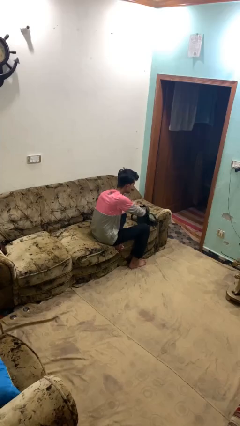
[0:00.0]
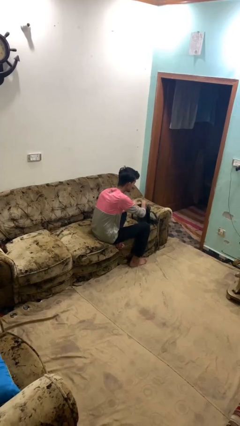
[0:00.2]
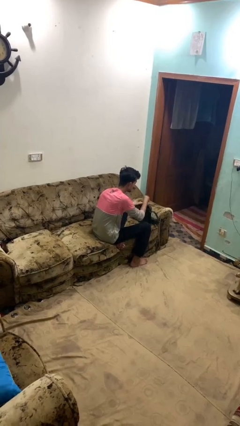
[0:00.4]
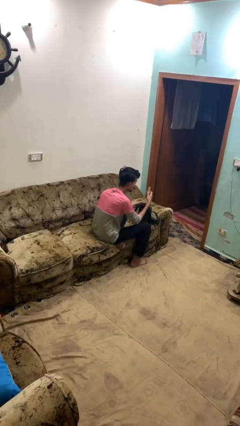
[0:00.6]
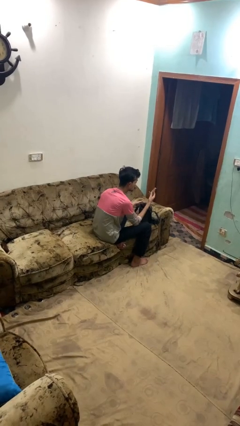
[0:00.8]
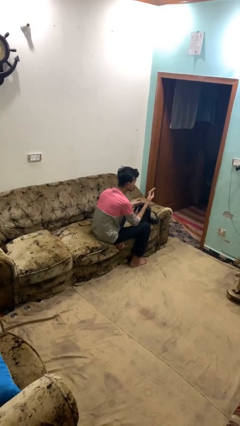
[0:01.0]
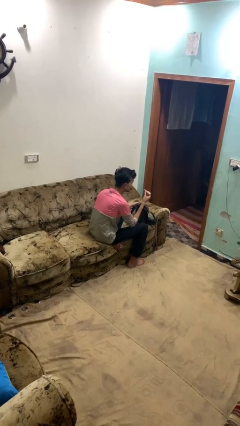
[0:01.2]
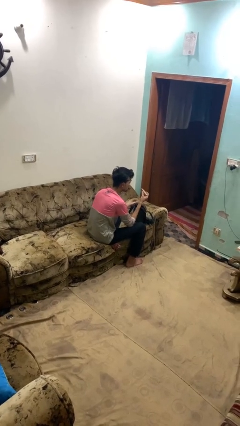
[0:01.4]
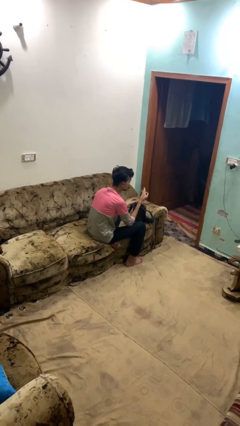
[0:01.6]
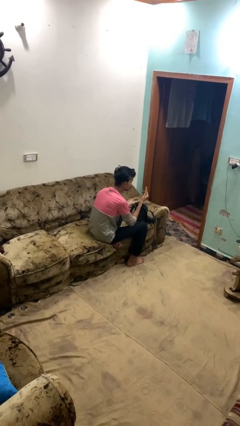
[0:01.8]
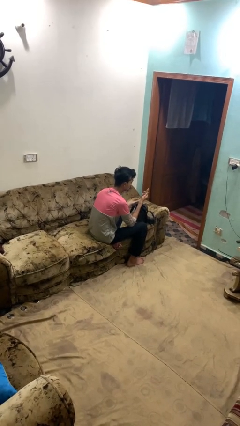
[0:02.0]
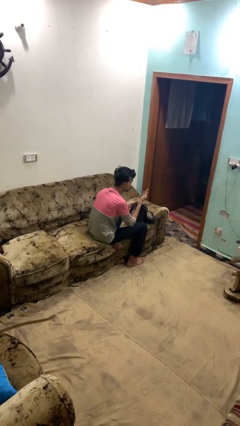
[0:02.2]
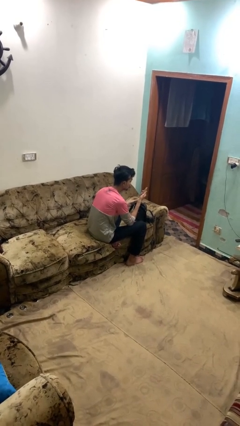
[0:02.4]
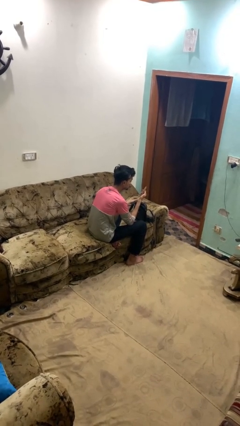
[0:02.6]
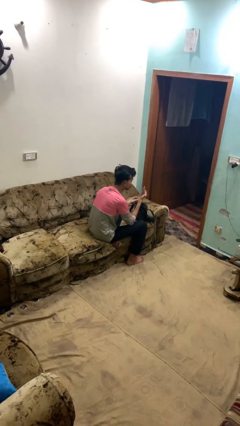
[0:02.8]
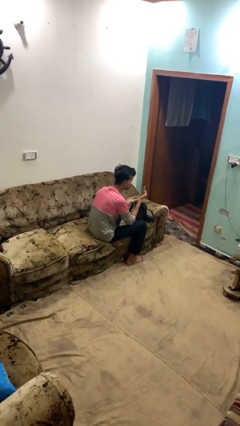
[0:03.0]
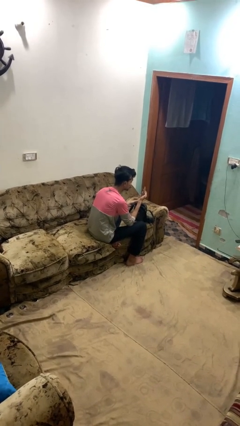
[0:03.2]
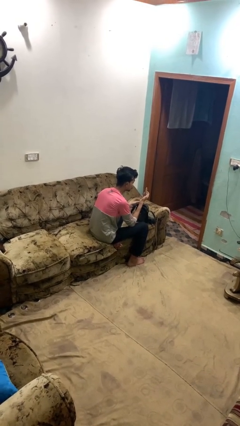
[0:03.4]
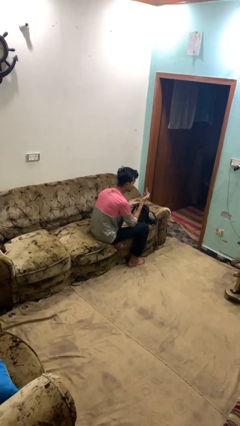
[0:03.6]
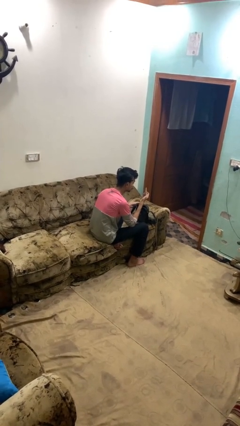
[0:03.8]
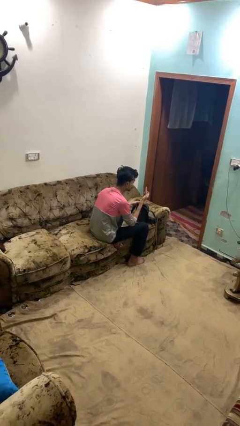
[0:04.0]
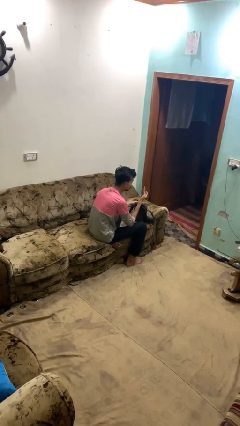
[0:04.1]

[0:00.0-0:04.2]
person takes object from backpack

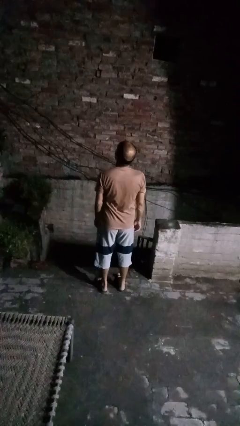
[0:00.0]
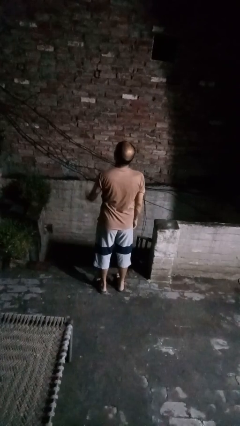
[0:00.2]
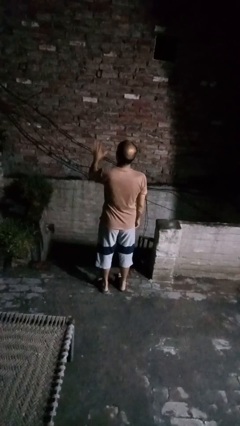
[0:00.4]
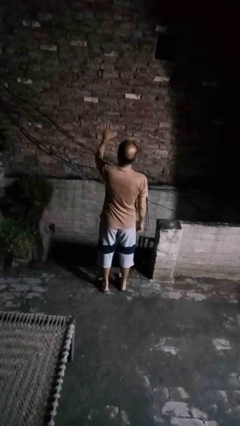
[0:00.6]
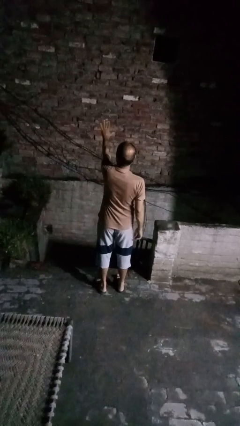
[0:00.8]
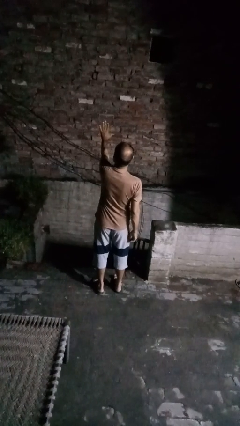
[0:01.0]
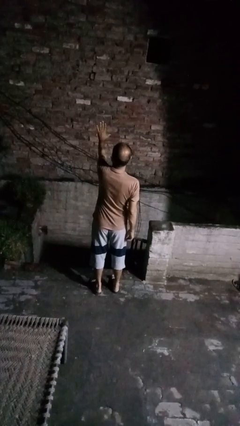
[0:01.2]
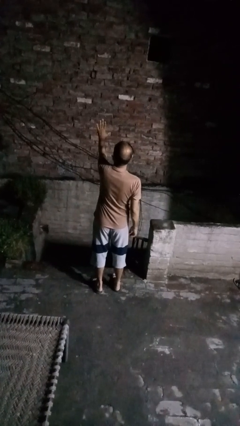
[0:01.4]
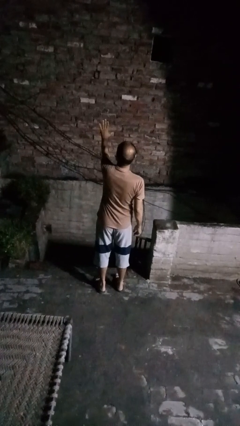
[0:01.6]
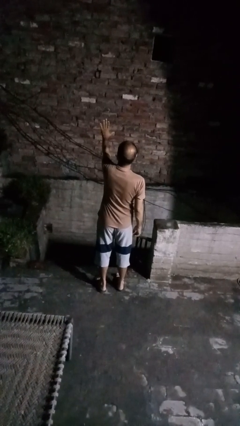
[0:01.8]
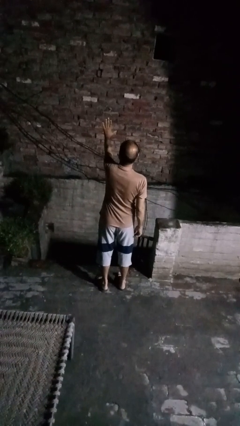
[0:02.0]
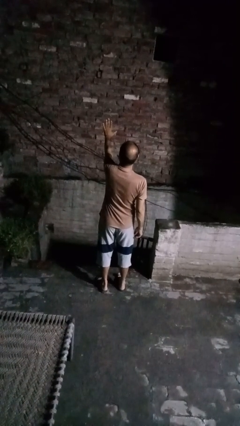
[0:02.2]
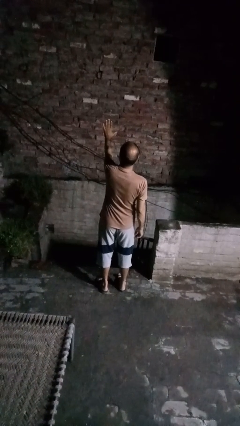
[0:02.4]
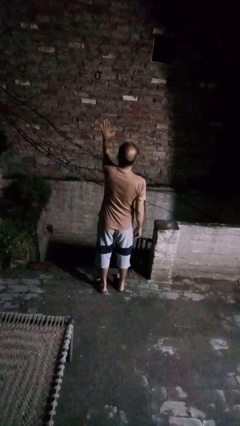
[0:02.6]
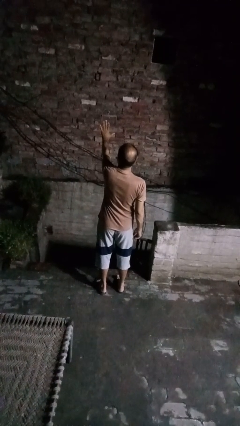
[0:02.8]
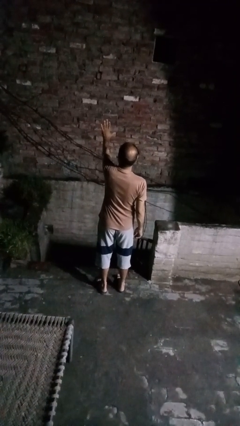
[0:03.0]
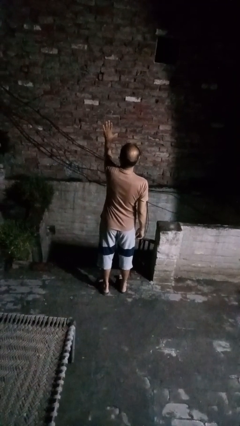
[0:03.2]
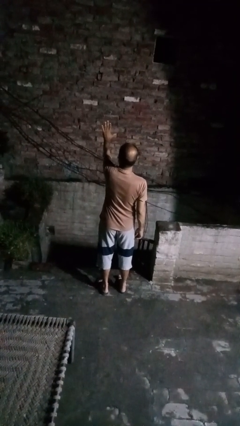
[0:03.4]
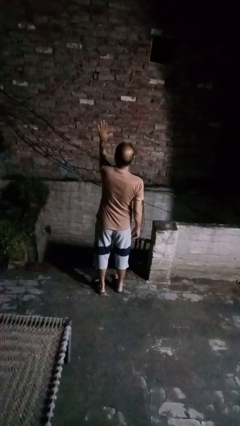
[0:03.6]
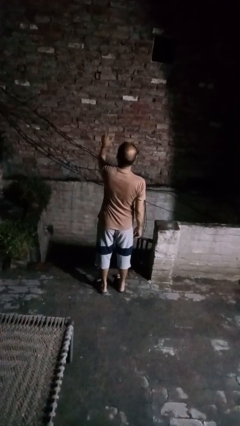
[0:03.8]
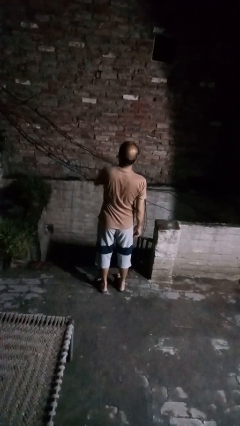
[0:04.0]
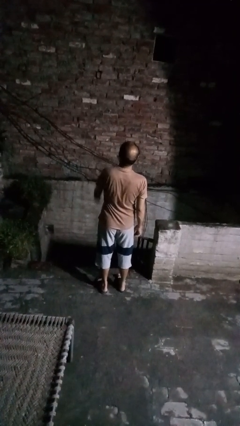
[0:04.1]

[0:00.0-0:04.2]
person gestures stop

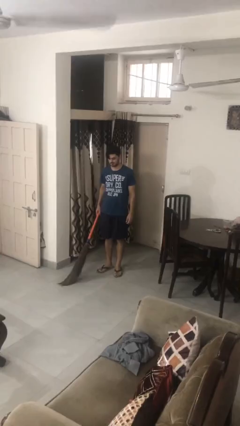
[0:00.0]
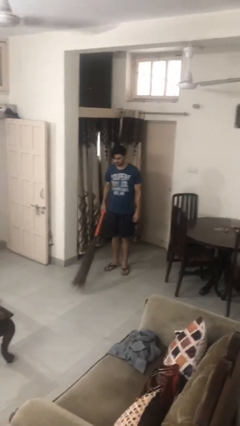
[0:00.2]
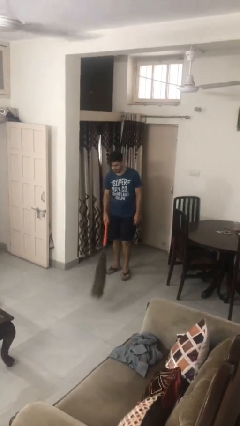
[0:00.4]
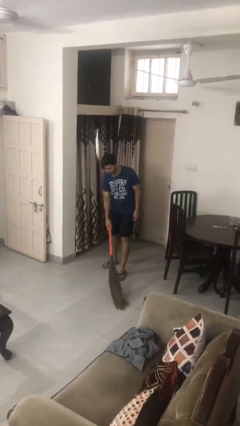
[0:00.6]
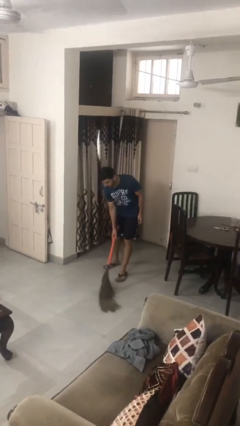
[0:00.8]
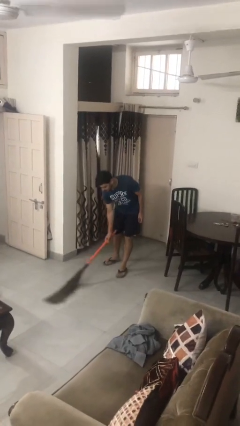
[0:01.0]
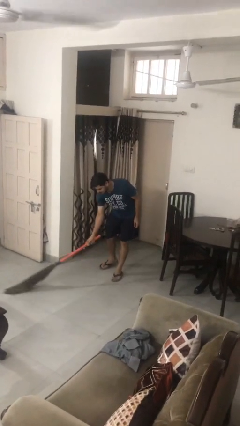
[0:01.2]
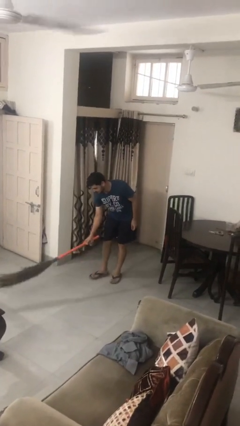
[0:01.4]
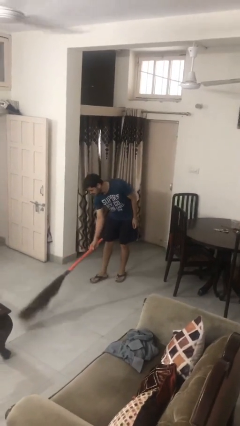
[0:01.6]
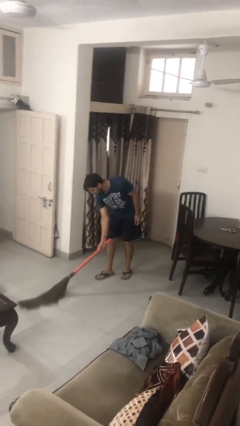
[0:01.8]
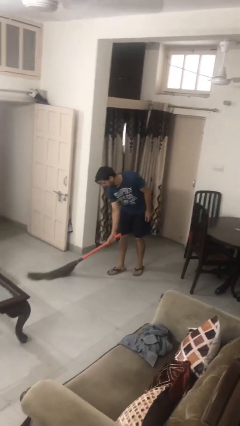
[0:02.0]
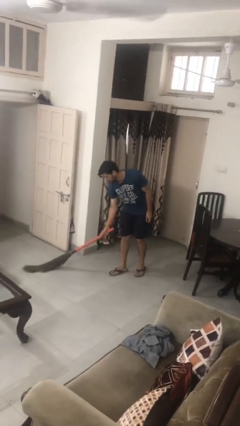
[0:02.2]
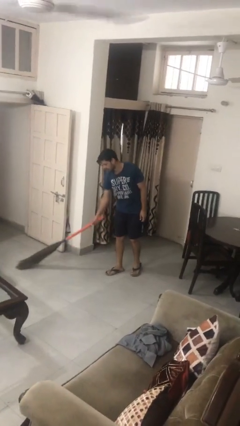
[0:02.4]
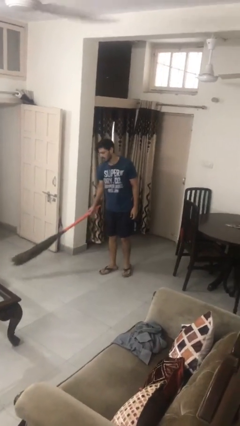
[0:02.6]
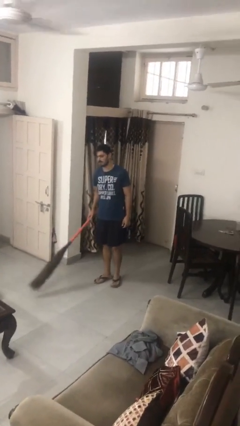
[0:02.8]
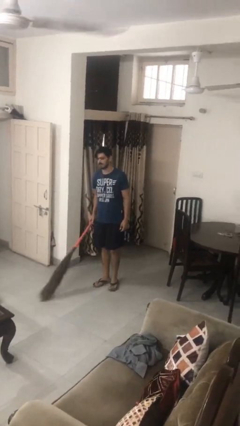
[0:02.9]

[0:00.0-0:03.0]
person sweeps floor

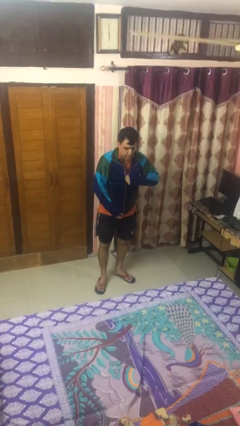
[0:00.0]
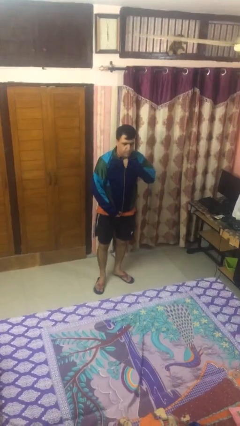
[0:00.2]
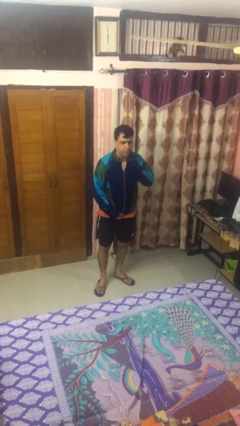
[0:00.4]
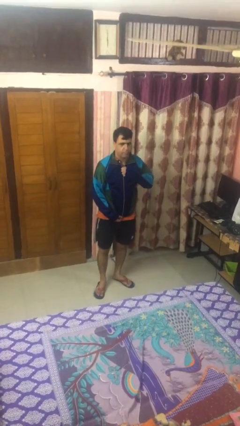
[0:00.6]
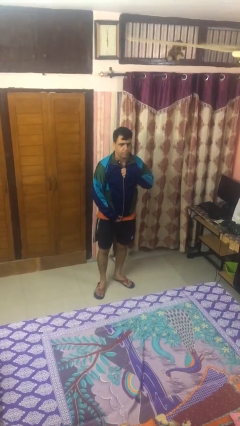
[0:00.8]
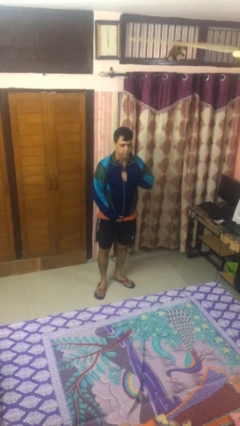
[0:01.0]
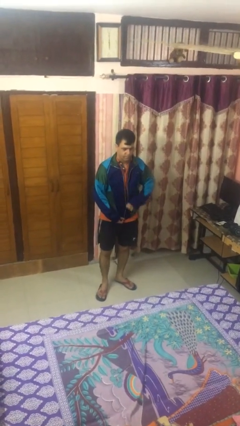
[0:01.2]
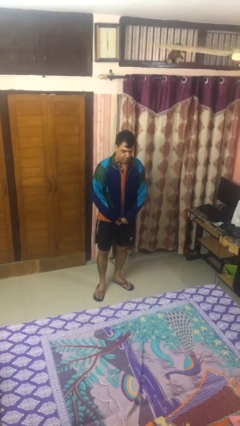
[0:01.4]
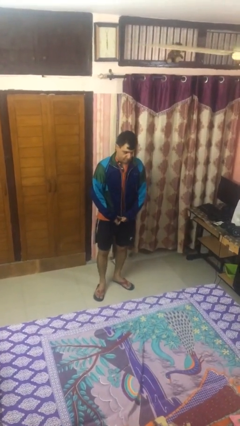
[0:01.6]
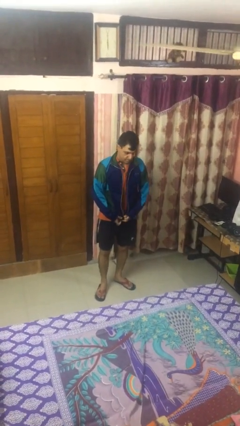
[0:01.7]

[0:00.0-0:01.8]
person unzips jacket

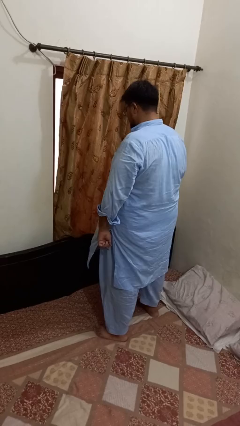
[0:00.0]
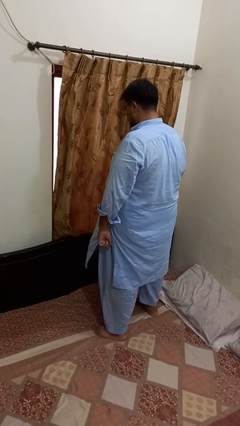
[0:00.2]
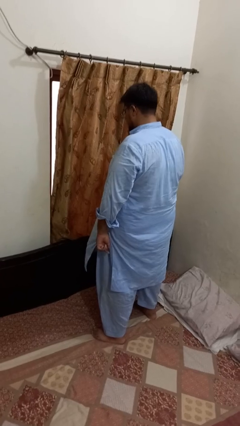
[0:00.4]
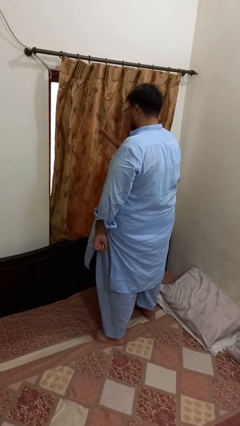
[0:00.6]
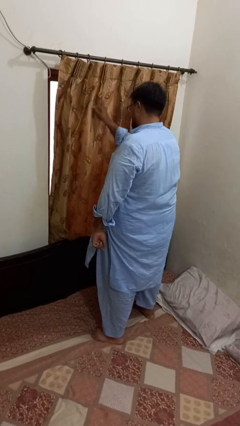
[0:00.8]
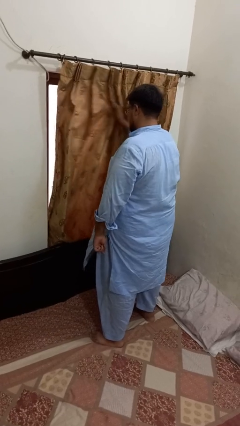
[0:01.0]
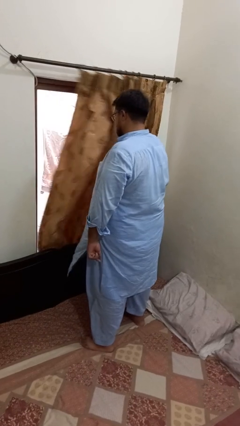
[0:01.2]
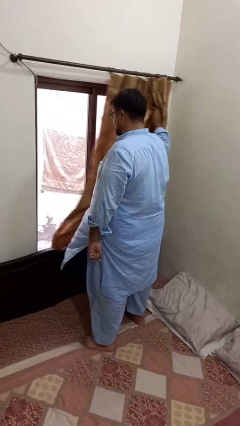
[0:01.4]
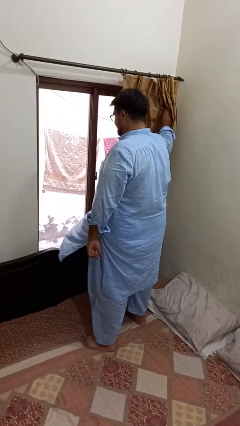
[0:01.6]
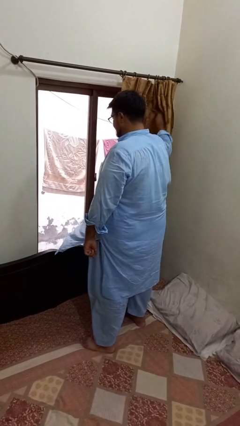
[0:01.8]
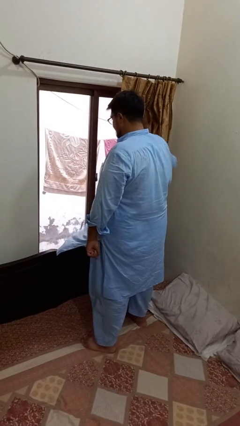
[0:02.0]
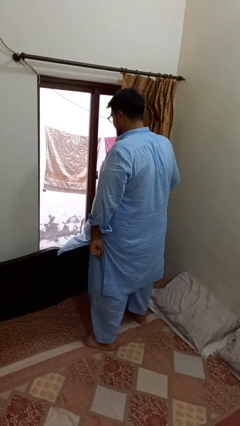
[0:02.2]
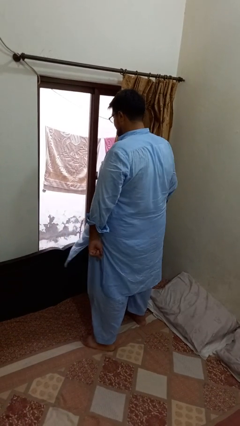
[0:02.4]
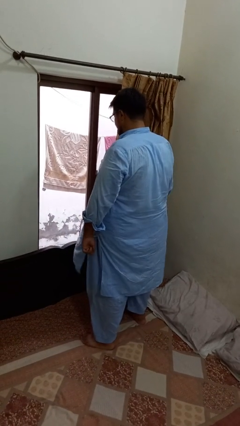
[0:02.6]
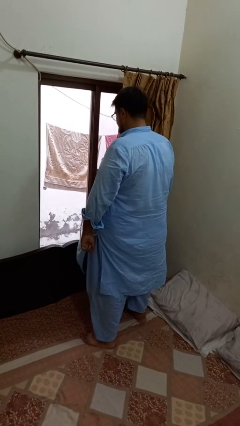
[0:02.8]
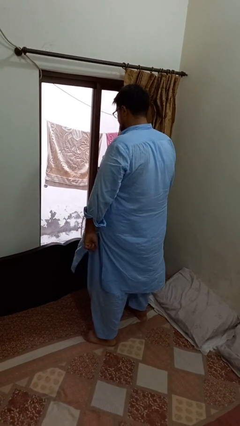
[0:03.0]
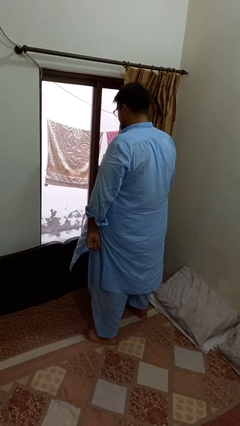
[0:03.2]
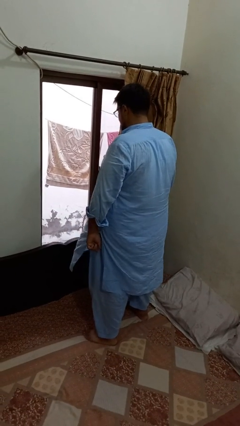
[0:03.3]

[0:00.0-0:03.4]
person opens curtains

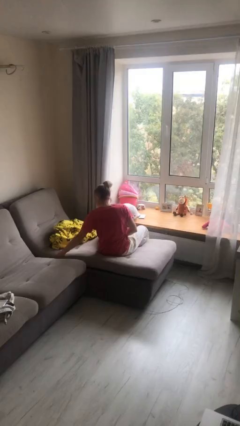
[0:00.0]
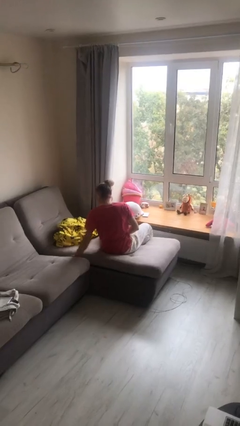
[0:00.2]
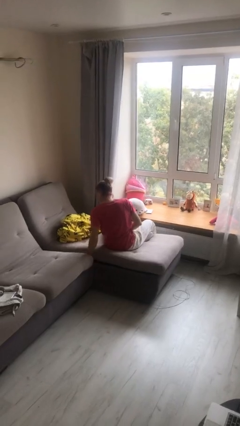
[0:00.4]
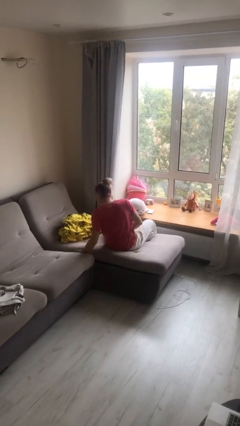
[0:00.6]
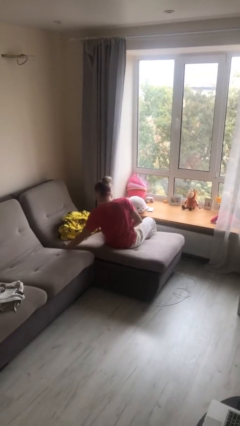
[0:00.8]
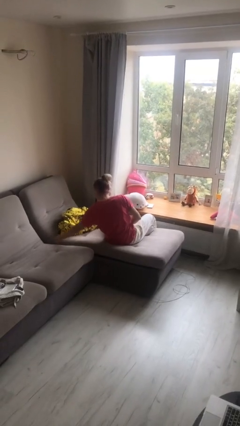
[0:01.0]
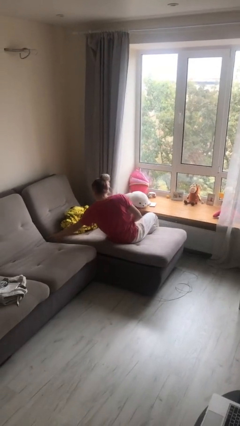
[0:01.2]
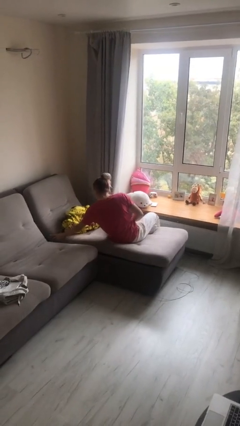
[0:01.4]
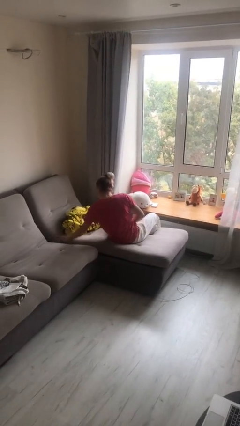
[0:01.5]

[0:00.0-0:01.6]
person searches in couch
